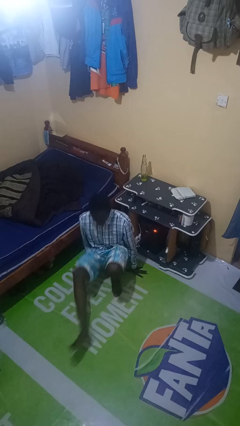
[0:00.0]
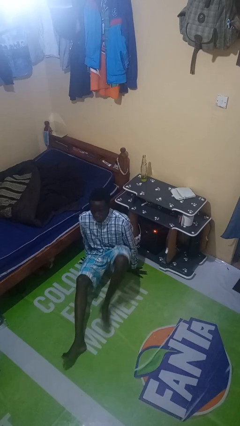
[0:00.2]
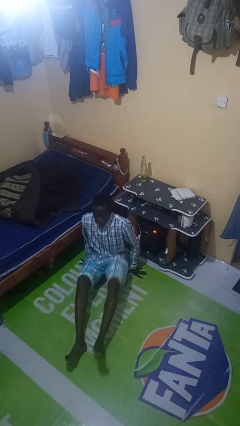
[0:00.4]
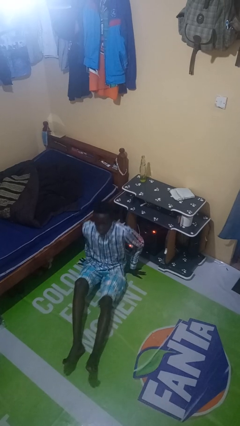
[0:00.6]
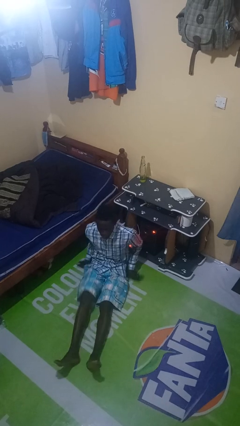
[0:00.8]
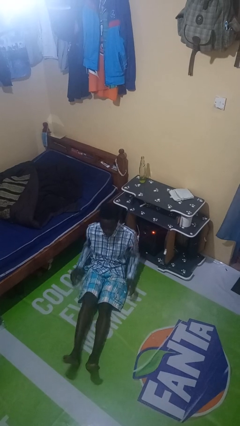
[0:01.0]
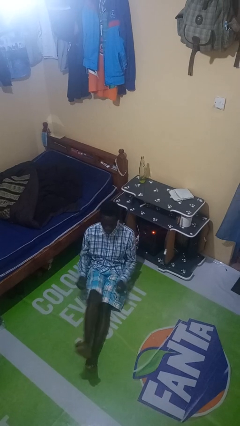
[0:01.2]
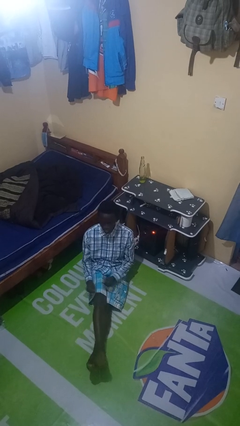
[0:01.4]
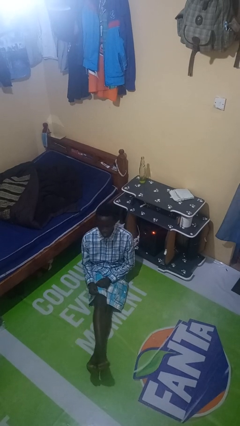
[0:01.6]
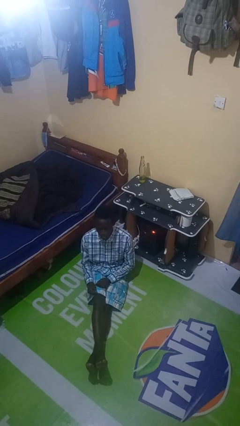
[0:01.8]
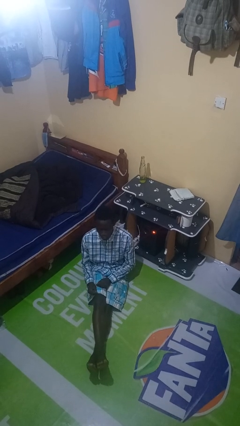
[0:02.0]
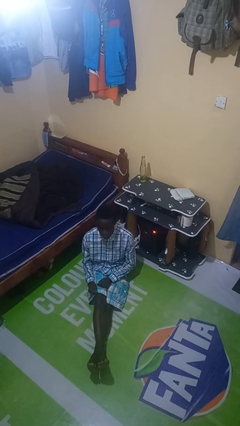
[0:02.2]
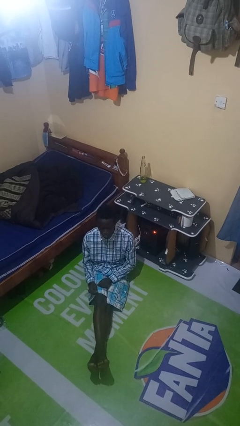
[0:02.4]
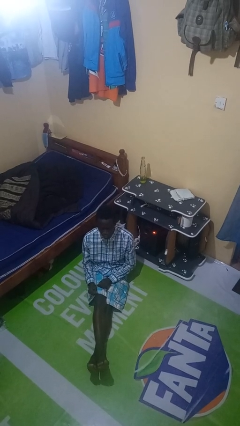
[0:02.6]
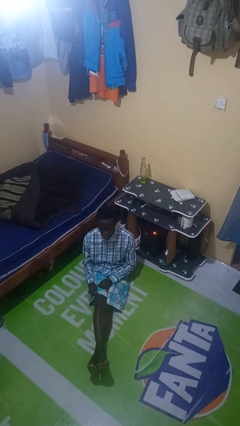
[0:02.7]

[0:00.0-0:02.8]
person sits crisscross

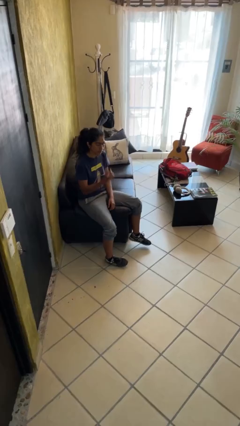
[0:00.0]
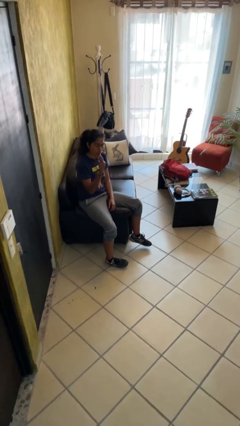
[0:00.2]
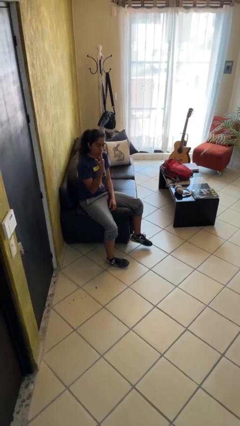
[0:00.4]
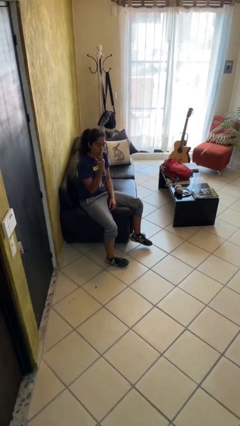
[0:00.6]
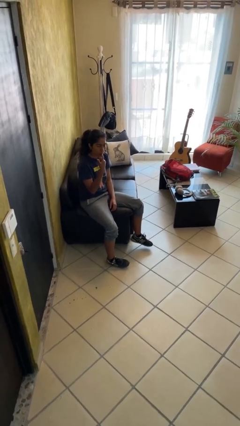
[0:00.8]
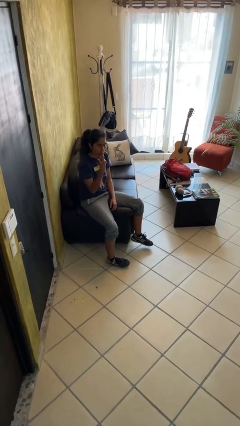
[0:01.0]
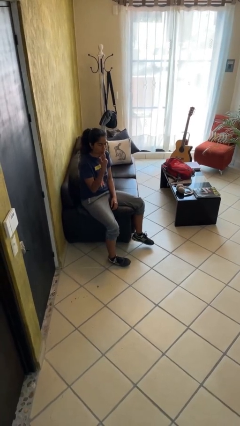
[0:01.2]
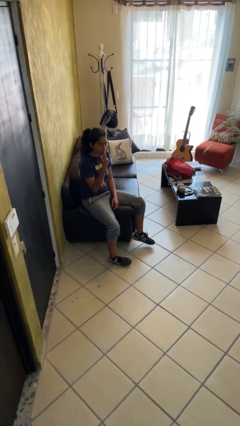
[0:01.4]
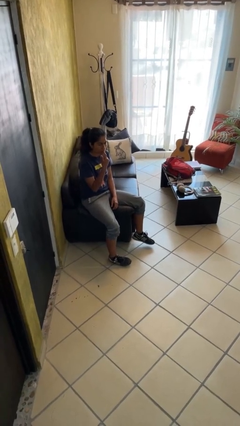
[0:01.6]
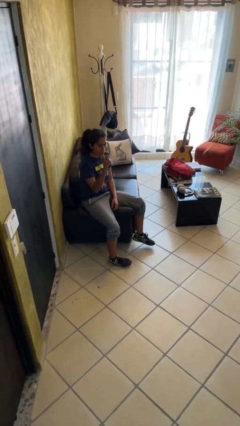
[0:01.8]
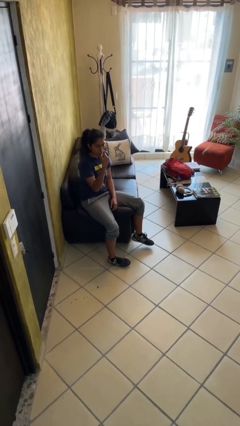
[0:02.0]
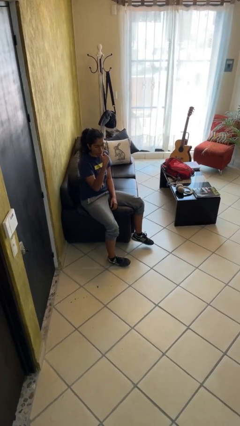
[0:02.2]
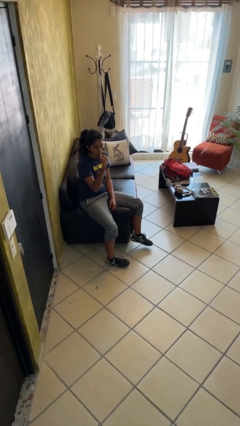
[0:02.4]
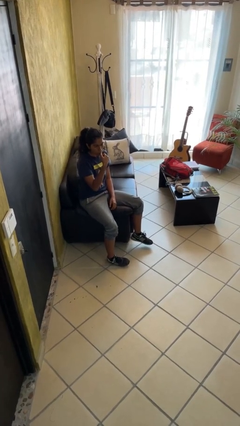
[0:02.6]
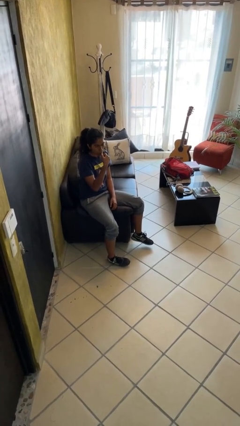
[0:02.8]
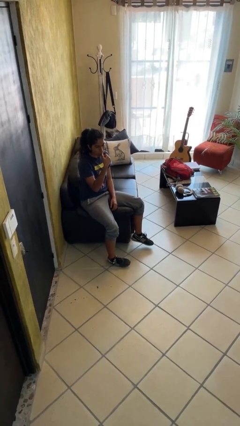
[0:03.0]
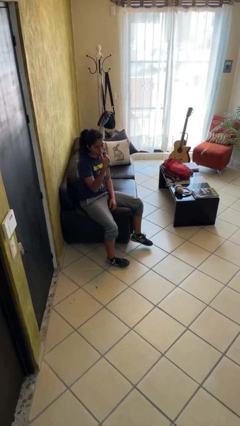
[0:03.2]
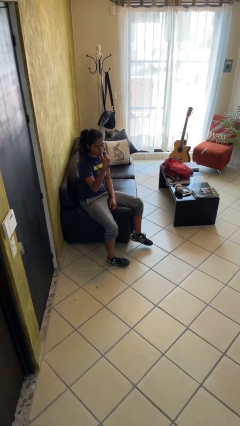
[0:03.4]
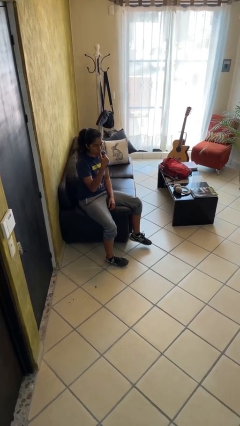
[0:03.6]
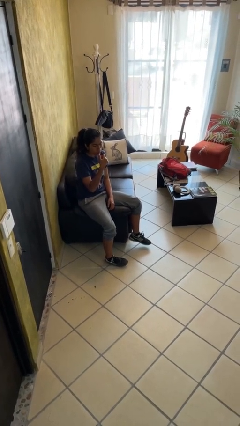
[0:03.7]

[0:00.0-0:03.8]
person licks fingers

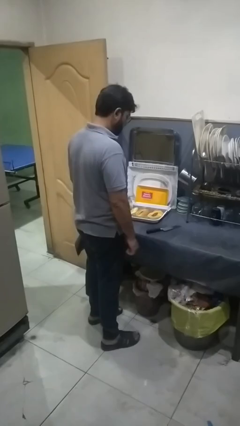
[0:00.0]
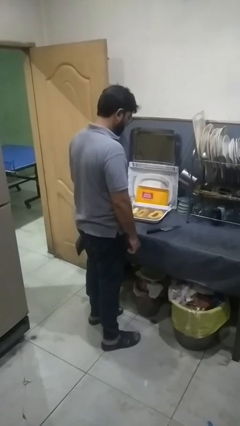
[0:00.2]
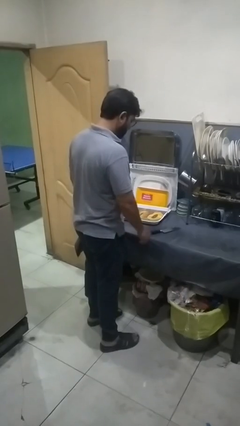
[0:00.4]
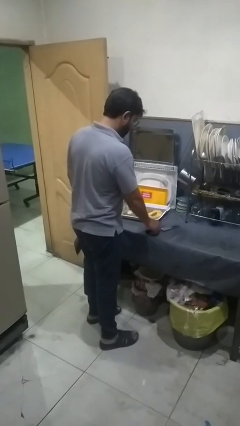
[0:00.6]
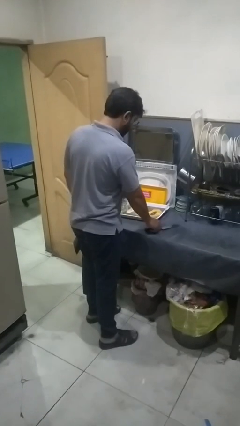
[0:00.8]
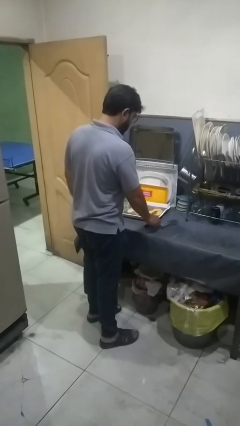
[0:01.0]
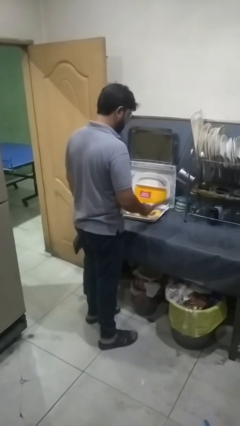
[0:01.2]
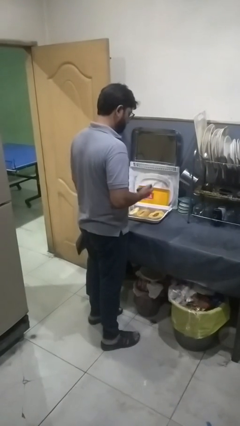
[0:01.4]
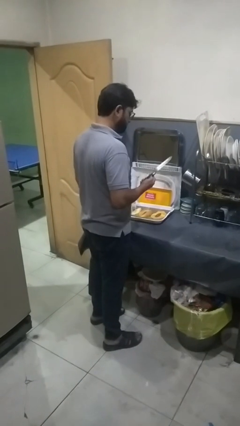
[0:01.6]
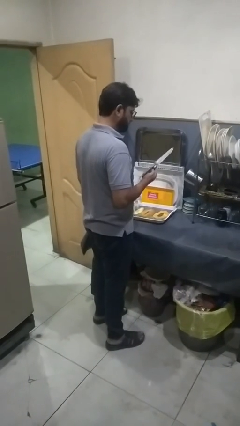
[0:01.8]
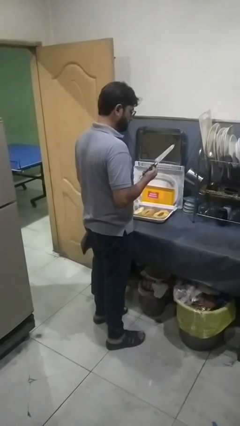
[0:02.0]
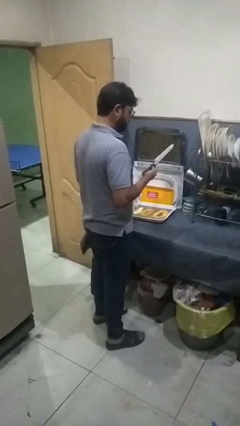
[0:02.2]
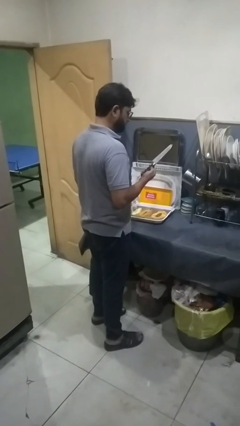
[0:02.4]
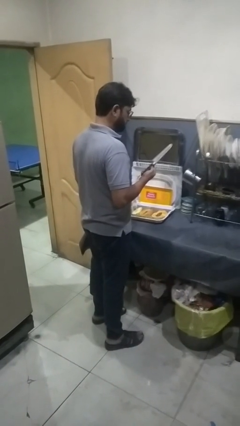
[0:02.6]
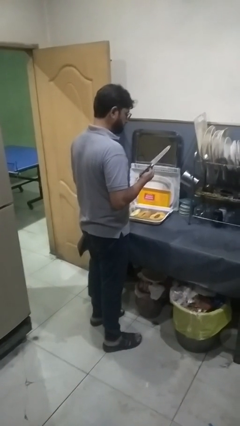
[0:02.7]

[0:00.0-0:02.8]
person picks up object from countertop

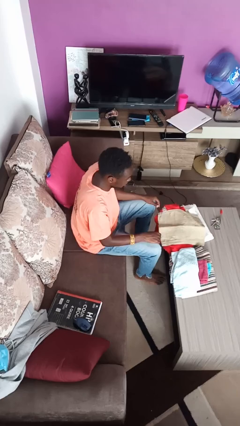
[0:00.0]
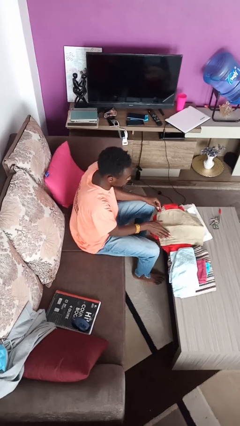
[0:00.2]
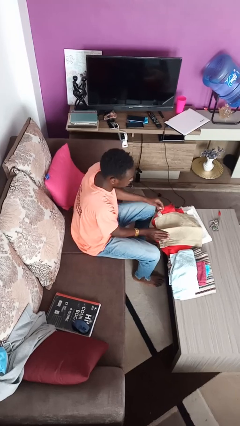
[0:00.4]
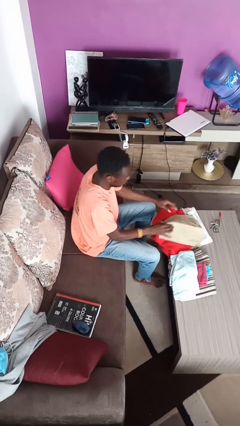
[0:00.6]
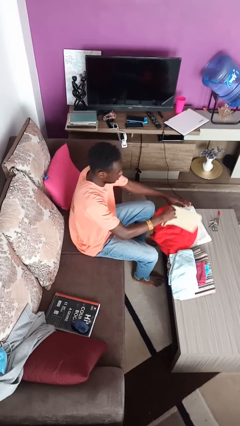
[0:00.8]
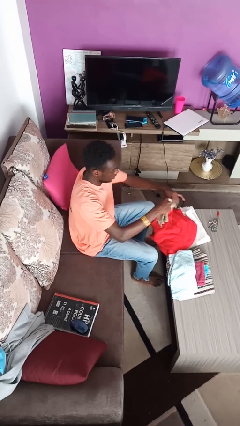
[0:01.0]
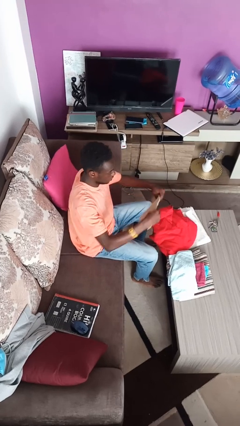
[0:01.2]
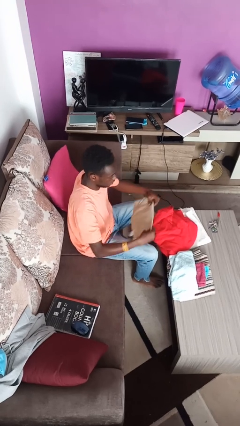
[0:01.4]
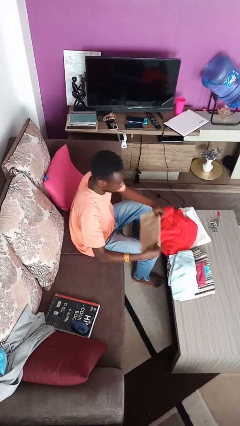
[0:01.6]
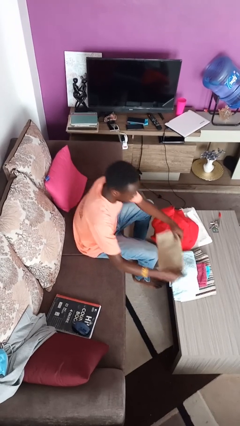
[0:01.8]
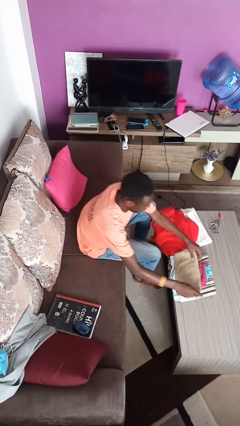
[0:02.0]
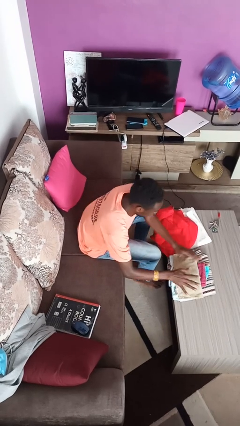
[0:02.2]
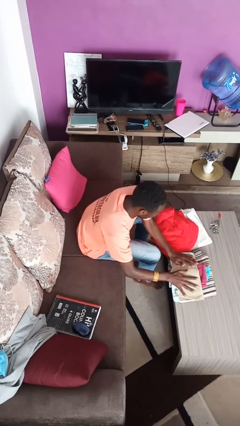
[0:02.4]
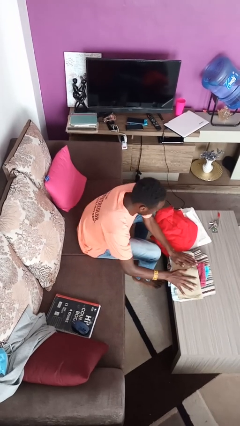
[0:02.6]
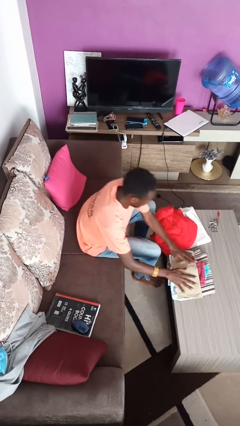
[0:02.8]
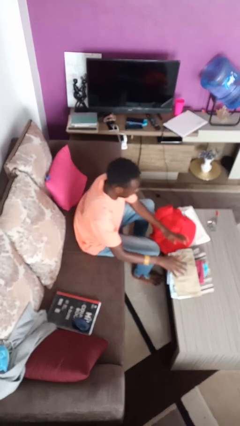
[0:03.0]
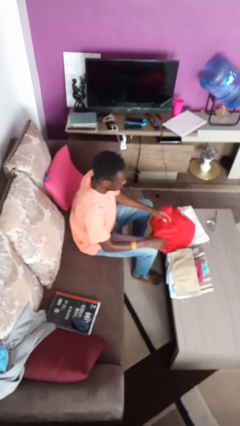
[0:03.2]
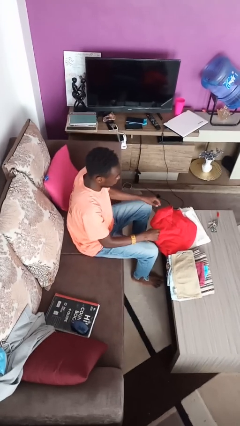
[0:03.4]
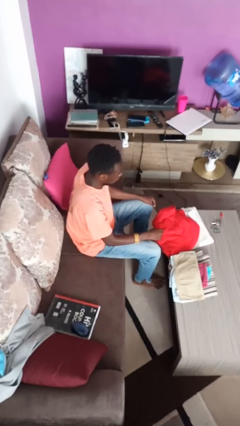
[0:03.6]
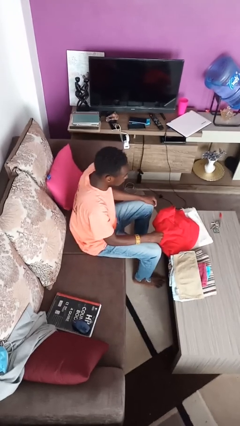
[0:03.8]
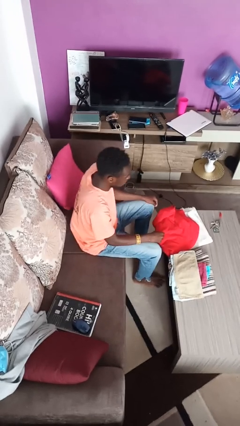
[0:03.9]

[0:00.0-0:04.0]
person folds towel

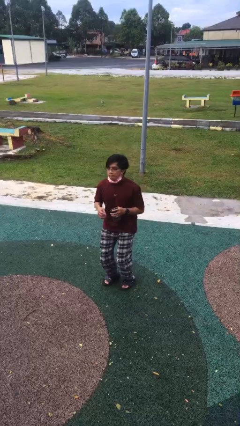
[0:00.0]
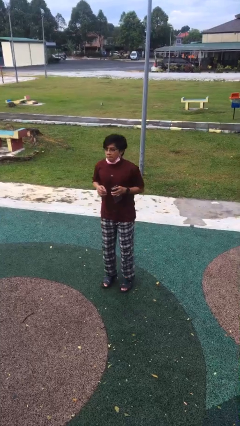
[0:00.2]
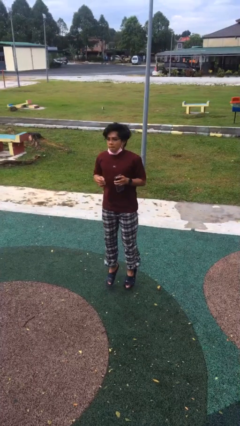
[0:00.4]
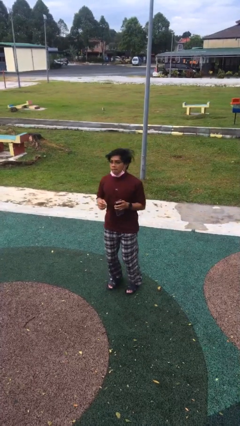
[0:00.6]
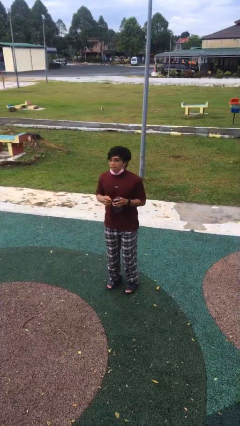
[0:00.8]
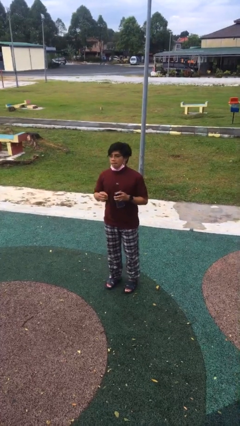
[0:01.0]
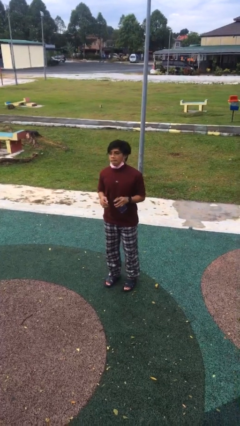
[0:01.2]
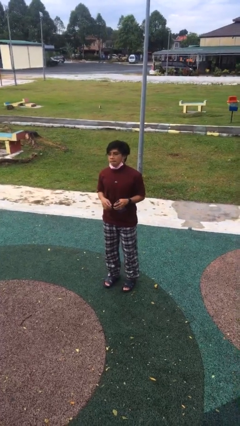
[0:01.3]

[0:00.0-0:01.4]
person jumps

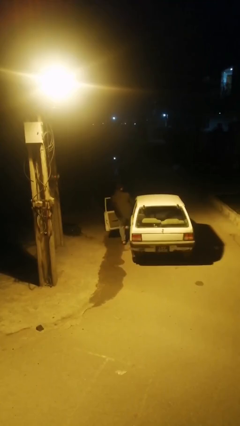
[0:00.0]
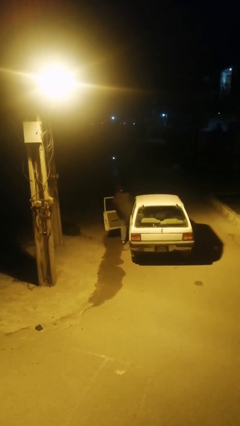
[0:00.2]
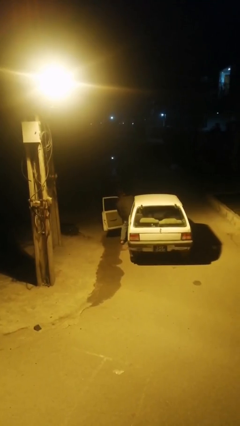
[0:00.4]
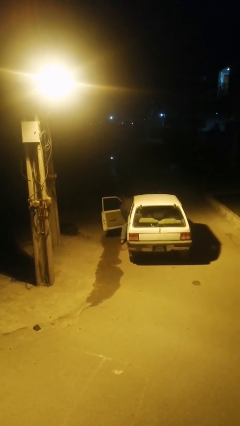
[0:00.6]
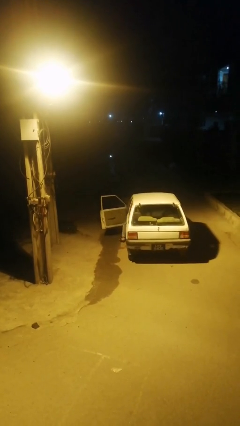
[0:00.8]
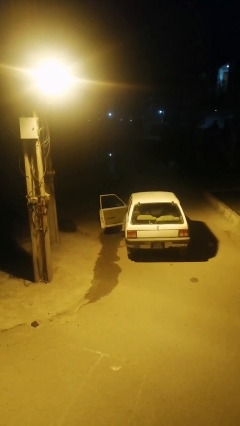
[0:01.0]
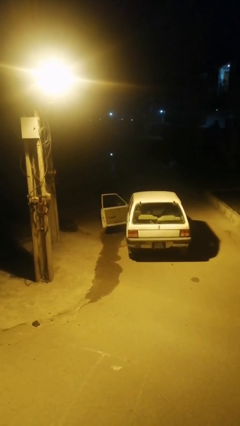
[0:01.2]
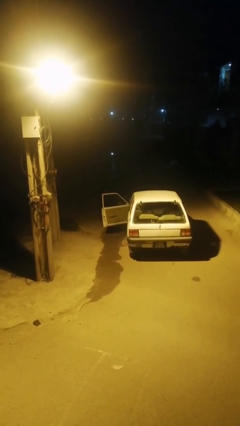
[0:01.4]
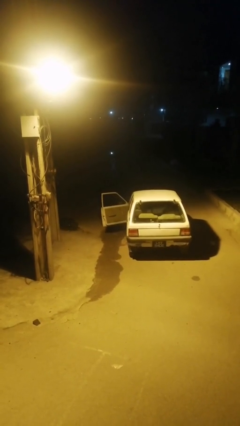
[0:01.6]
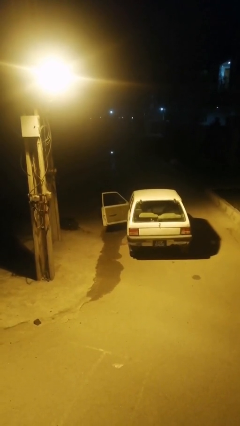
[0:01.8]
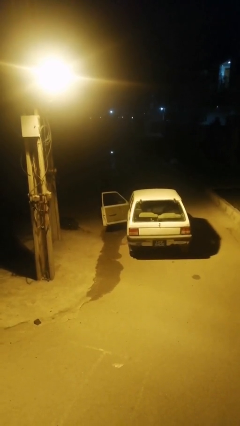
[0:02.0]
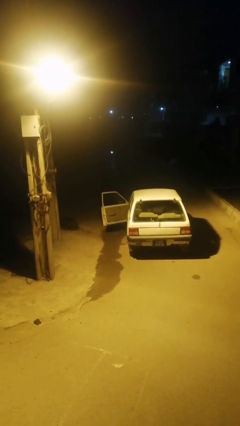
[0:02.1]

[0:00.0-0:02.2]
person enters car

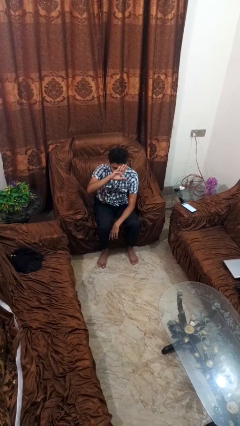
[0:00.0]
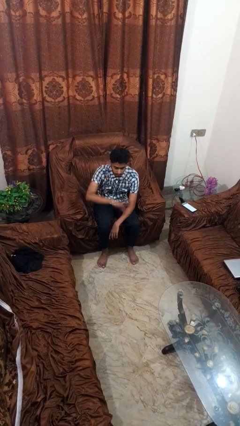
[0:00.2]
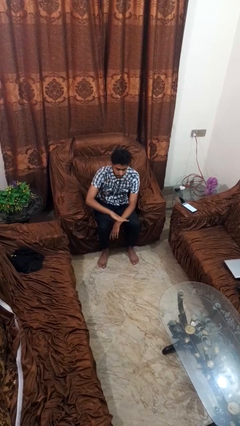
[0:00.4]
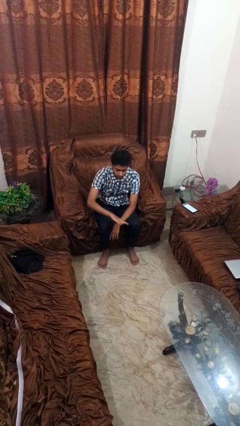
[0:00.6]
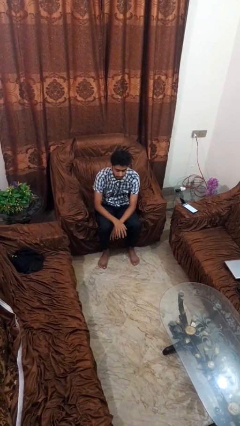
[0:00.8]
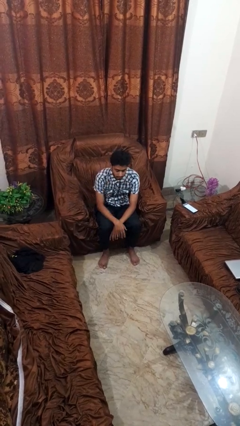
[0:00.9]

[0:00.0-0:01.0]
person gestures swipe down
